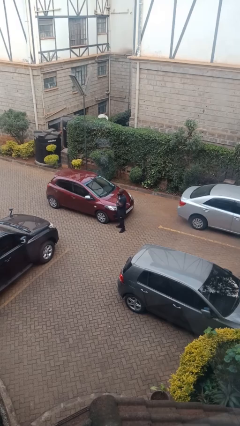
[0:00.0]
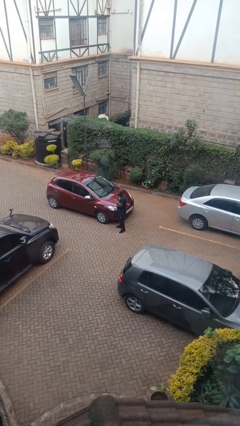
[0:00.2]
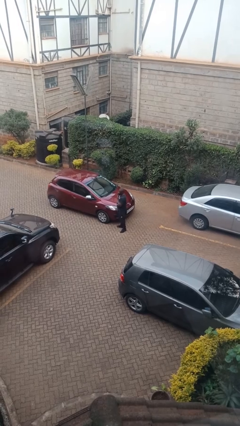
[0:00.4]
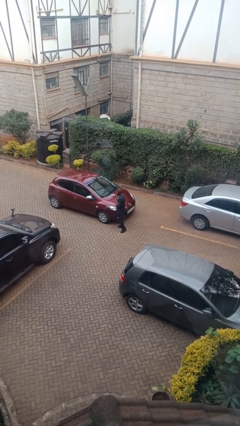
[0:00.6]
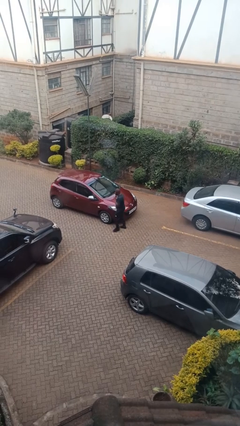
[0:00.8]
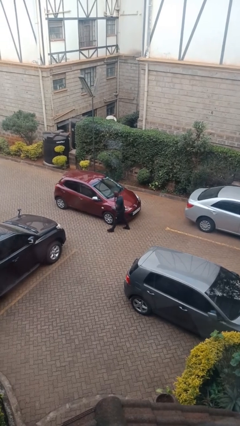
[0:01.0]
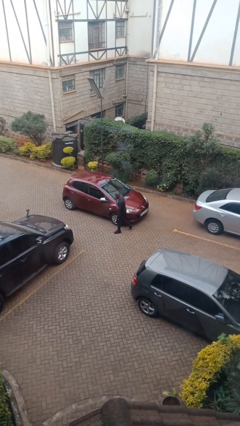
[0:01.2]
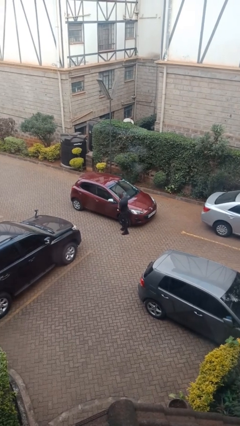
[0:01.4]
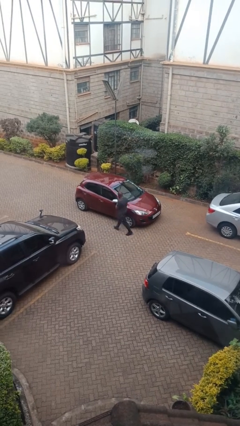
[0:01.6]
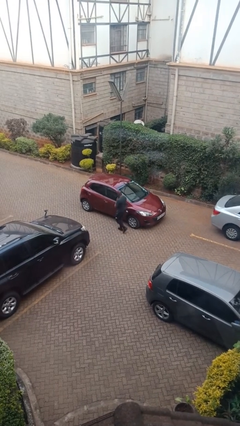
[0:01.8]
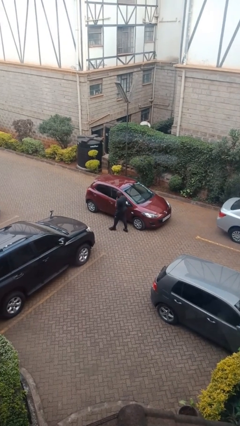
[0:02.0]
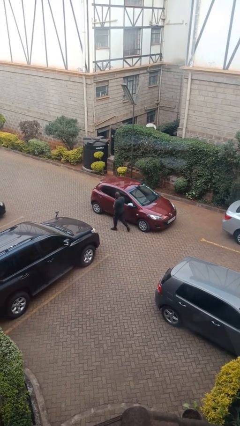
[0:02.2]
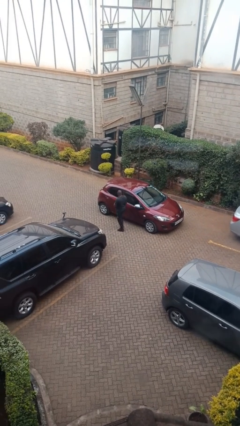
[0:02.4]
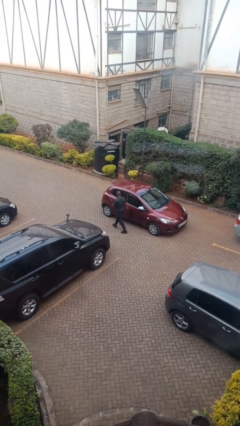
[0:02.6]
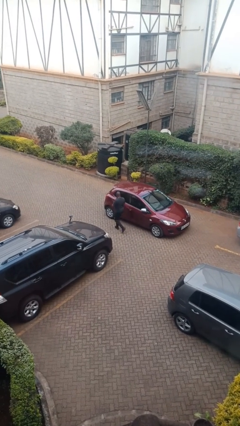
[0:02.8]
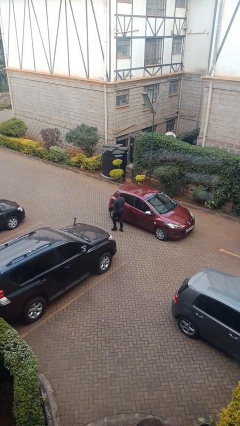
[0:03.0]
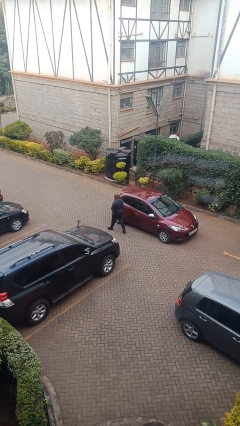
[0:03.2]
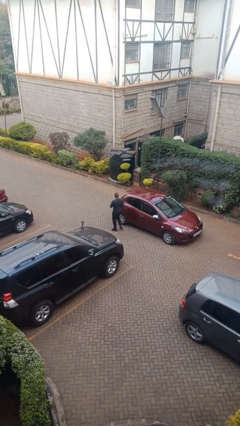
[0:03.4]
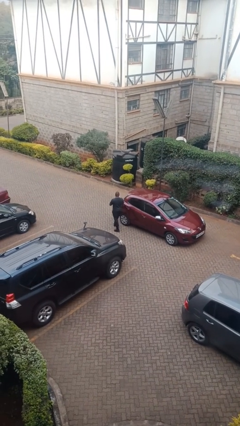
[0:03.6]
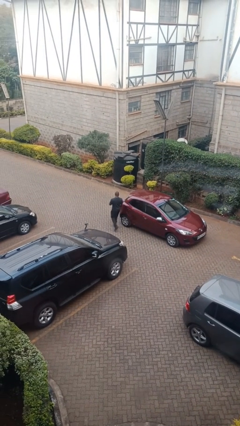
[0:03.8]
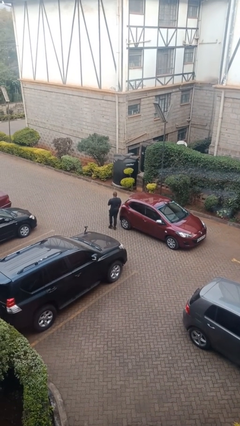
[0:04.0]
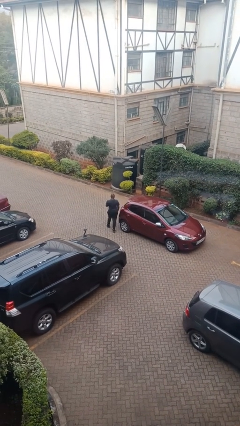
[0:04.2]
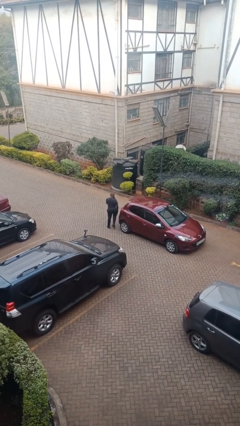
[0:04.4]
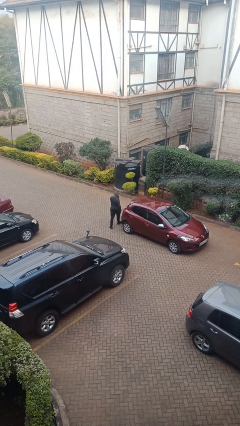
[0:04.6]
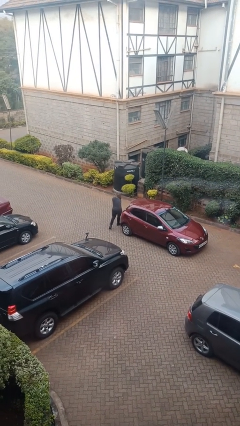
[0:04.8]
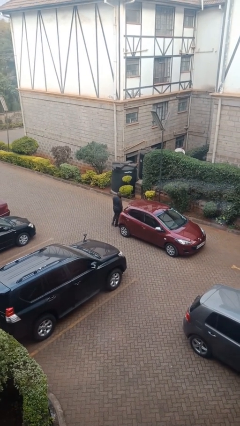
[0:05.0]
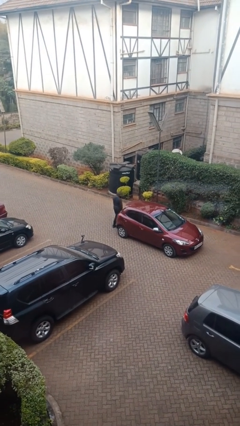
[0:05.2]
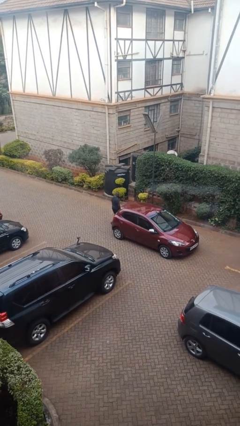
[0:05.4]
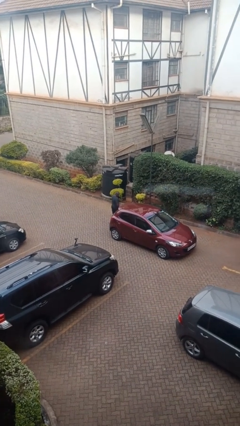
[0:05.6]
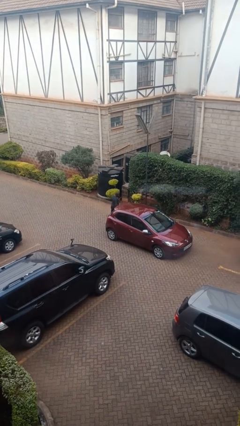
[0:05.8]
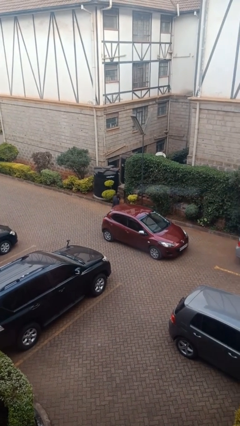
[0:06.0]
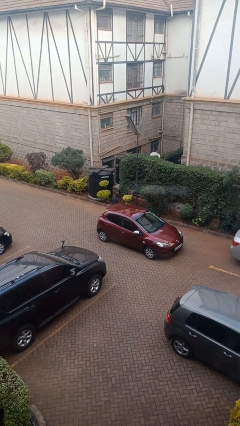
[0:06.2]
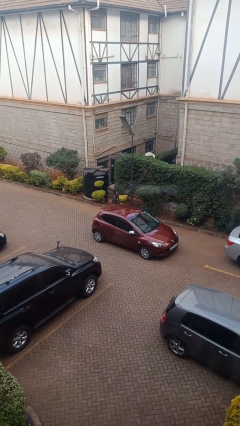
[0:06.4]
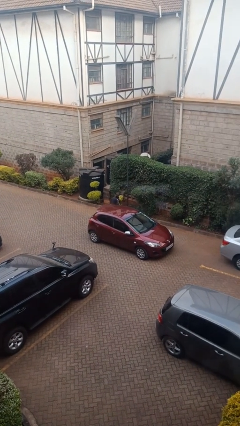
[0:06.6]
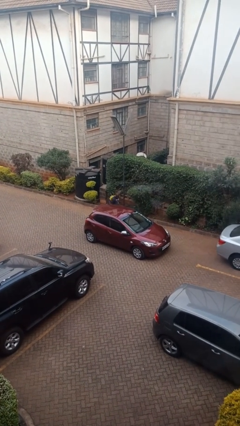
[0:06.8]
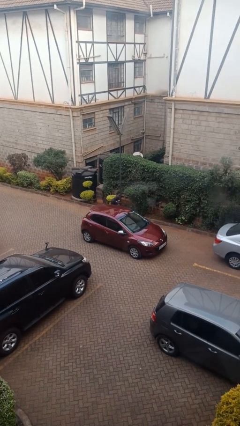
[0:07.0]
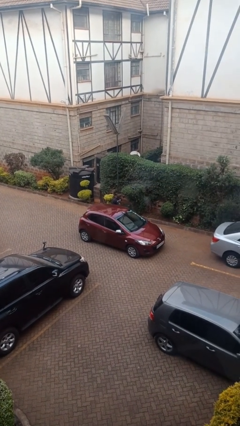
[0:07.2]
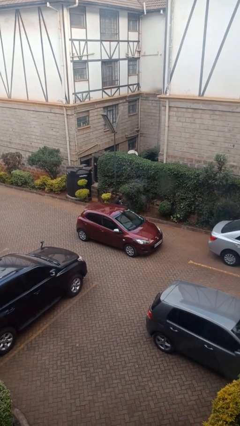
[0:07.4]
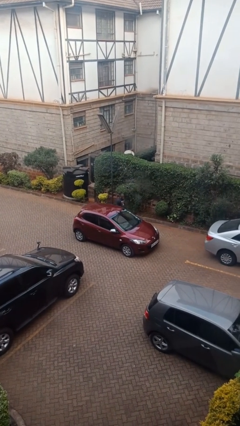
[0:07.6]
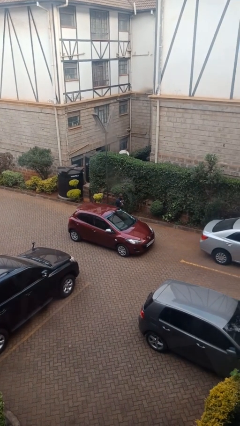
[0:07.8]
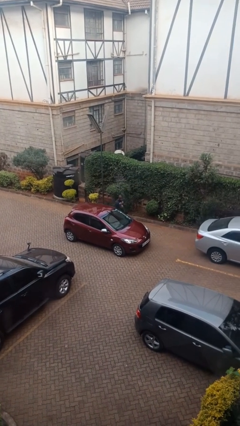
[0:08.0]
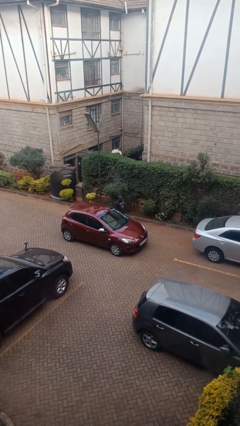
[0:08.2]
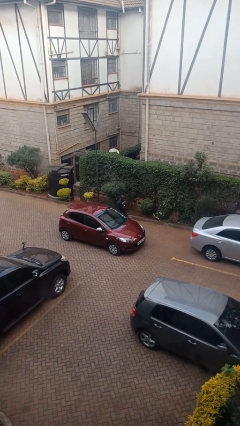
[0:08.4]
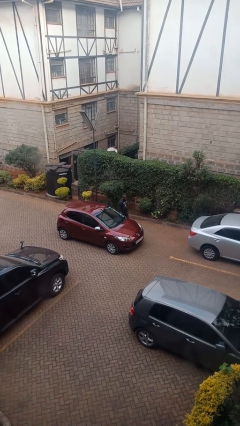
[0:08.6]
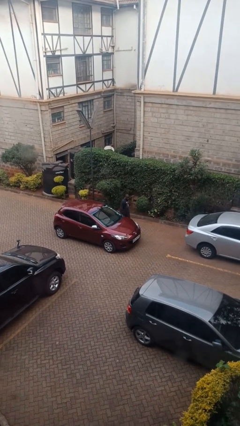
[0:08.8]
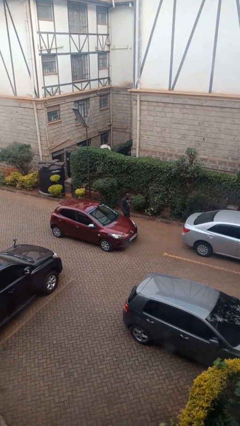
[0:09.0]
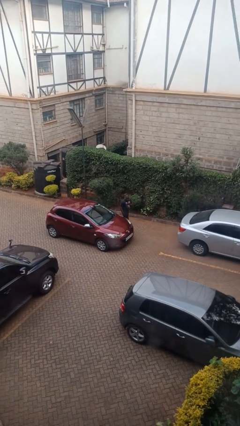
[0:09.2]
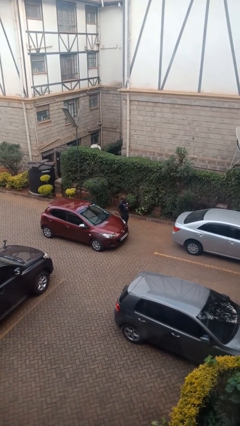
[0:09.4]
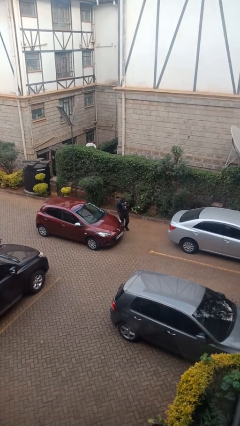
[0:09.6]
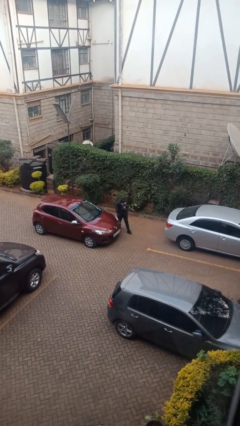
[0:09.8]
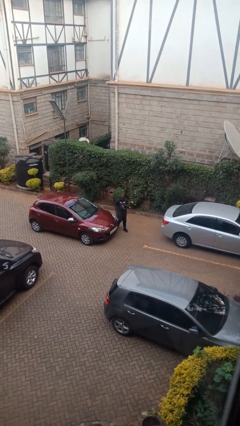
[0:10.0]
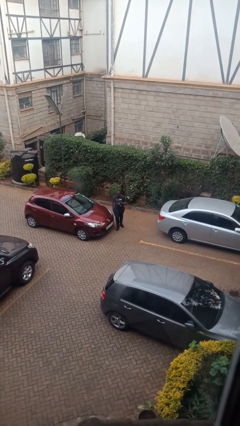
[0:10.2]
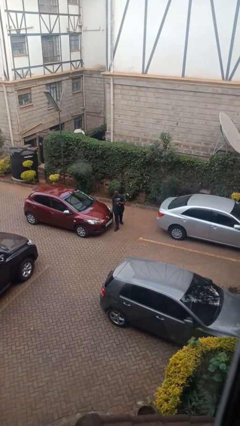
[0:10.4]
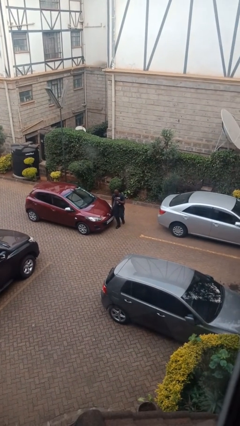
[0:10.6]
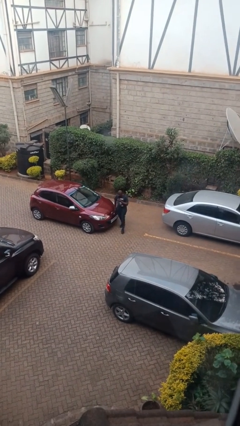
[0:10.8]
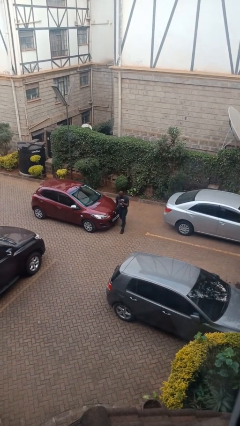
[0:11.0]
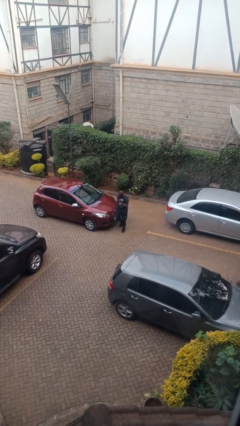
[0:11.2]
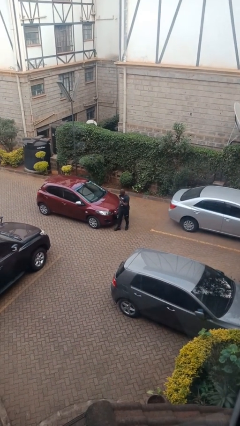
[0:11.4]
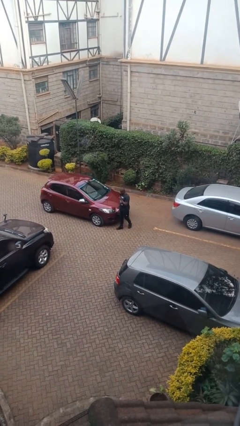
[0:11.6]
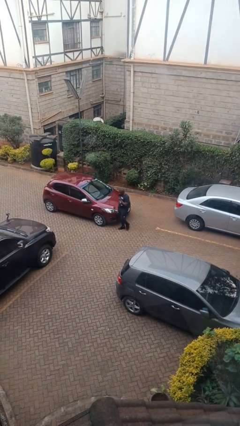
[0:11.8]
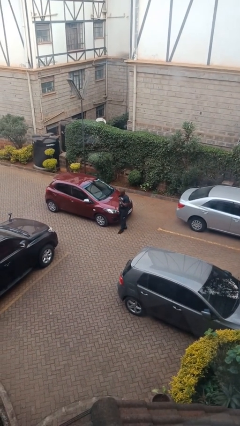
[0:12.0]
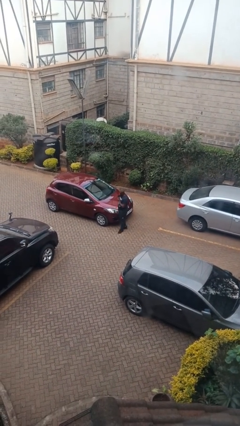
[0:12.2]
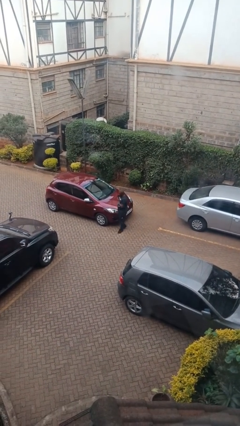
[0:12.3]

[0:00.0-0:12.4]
person walks around car

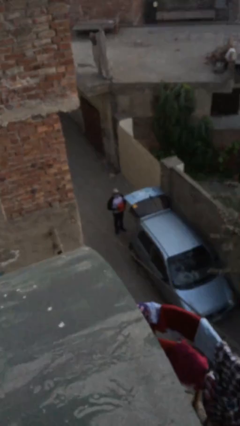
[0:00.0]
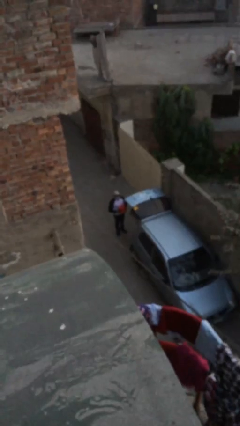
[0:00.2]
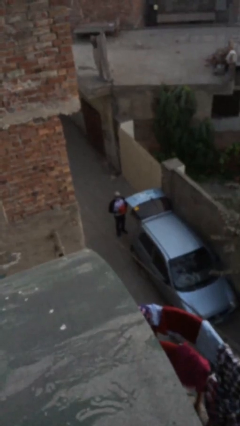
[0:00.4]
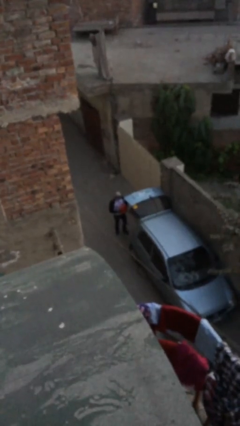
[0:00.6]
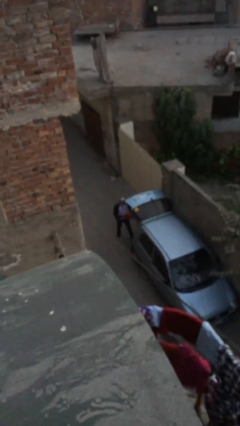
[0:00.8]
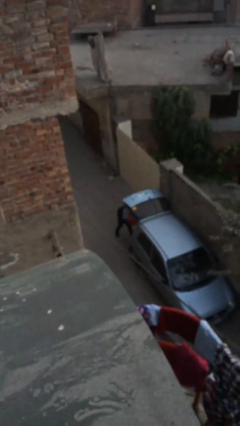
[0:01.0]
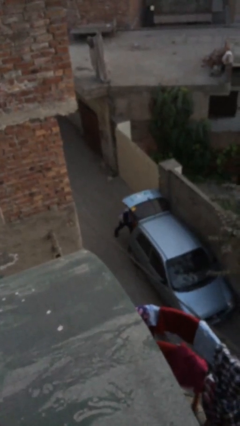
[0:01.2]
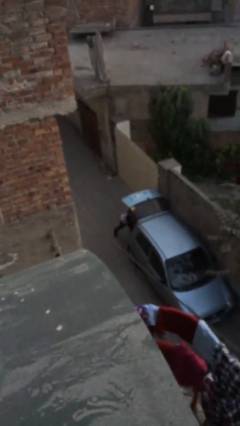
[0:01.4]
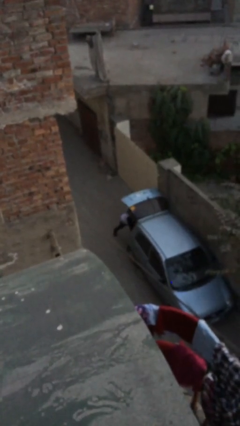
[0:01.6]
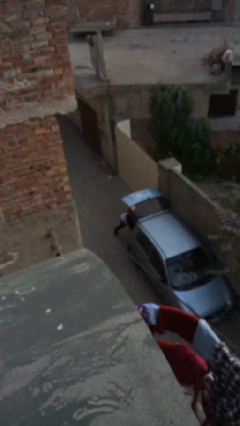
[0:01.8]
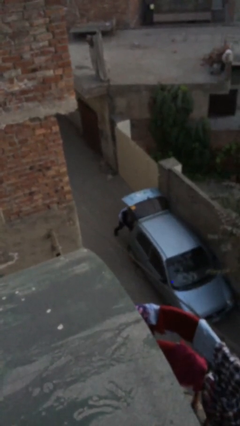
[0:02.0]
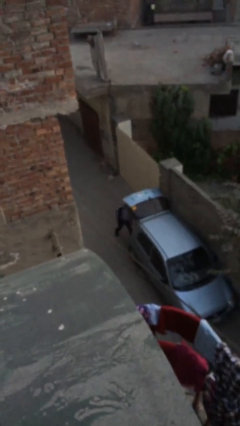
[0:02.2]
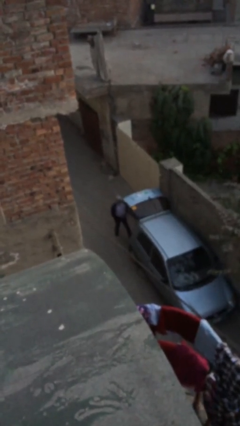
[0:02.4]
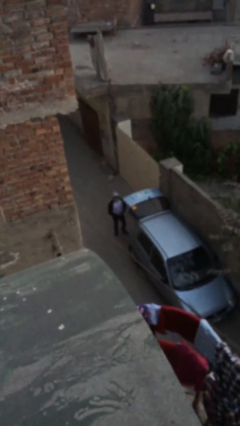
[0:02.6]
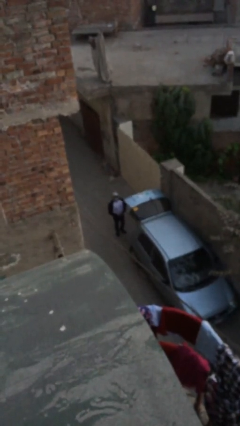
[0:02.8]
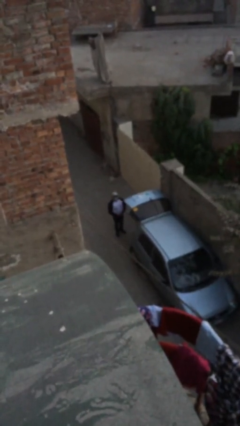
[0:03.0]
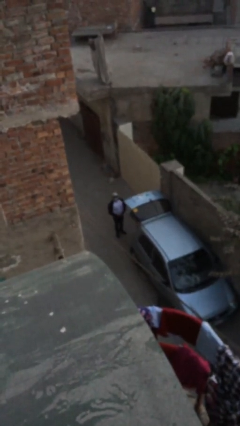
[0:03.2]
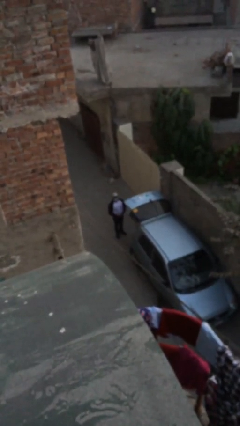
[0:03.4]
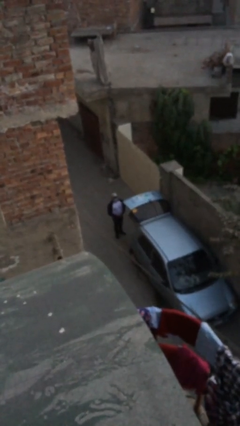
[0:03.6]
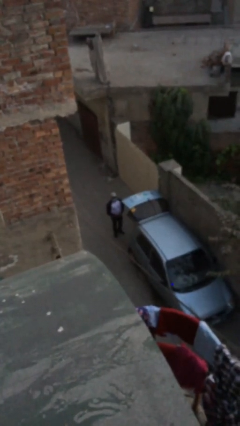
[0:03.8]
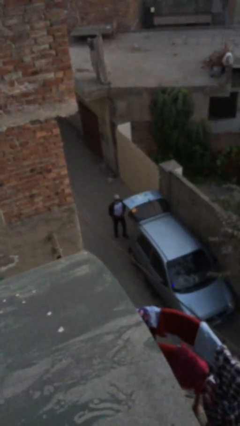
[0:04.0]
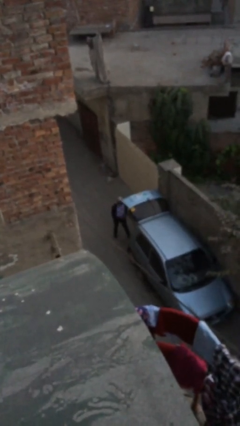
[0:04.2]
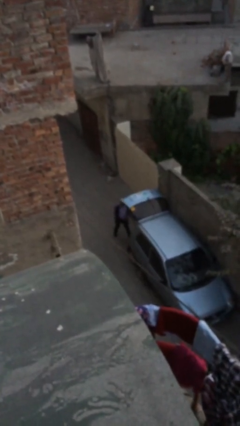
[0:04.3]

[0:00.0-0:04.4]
person loads car

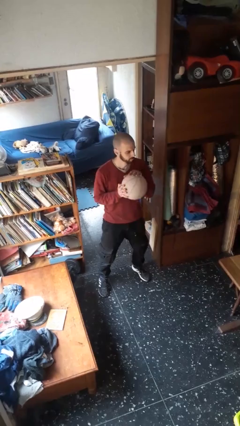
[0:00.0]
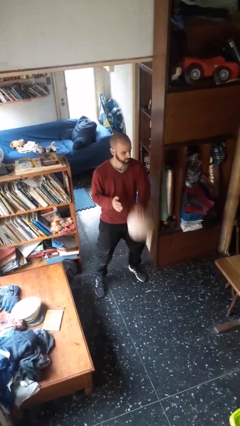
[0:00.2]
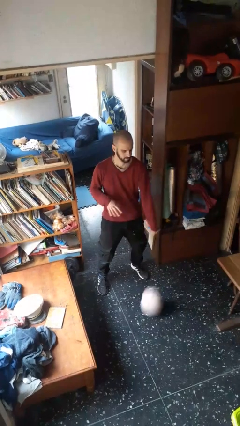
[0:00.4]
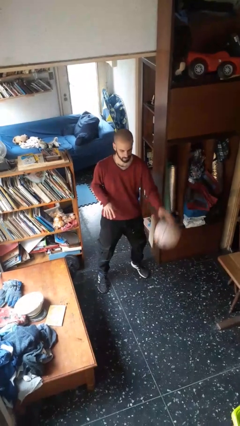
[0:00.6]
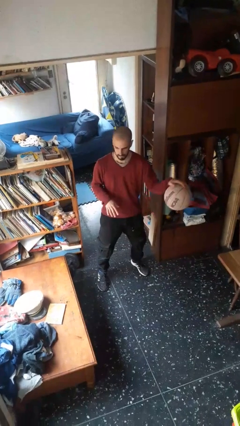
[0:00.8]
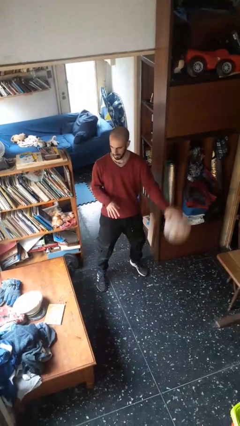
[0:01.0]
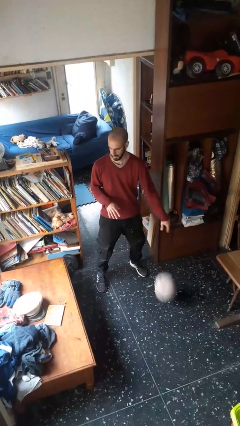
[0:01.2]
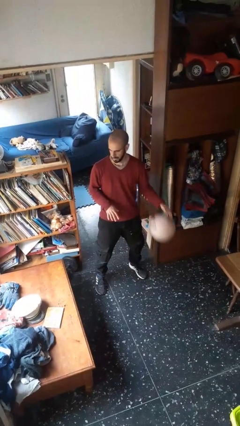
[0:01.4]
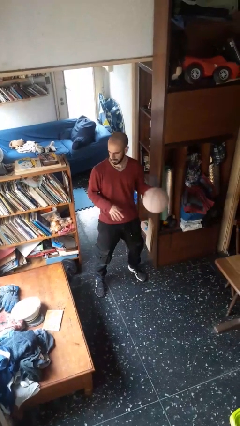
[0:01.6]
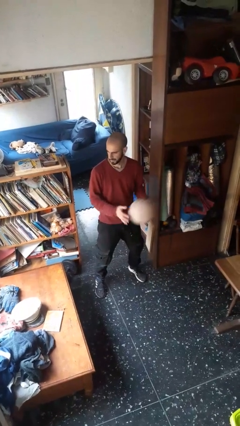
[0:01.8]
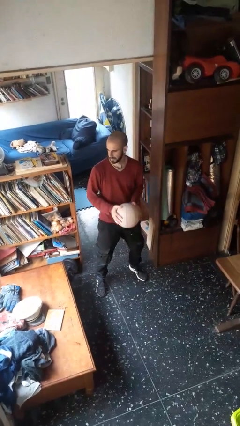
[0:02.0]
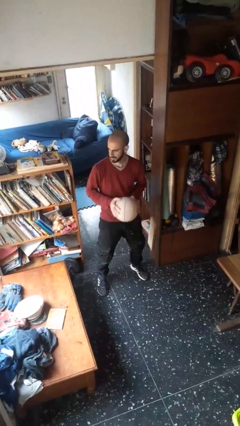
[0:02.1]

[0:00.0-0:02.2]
person bounces ball on floor
